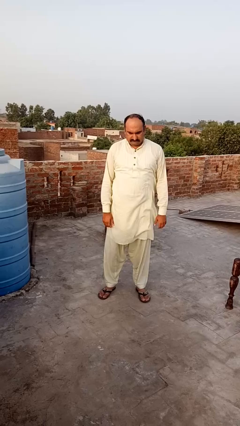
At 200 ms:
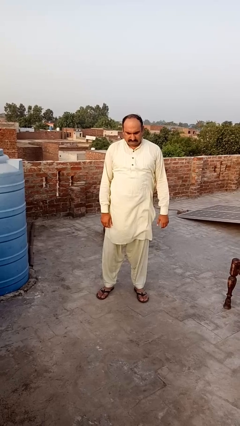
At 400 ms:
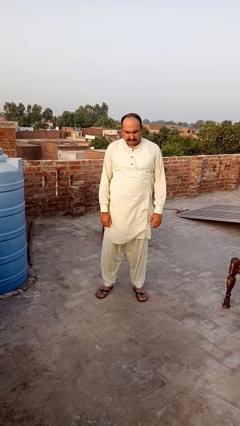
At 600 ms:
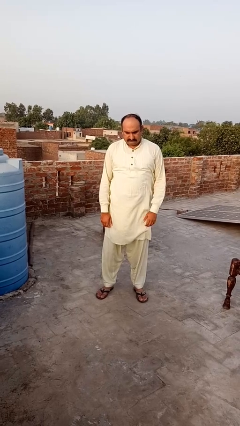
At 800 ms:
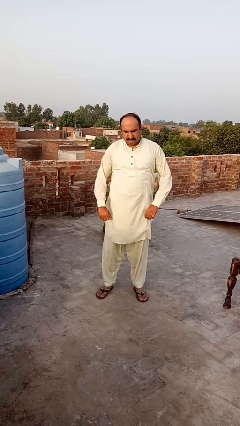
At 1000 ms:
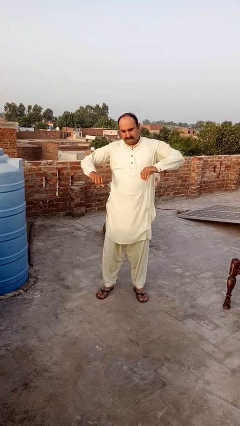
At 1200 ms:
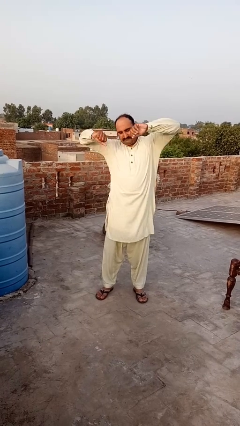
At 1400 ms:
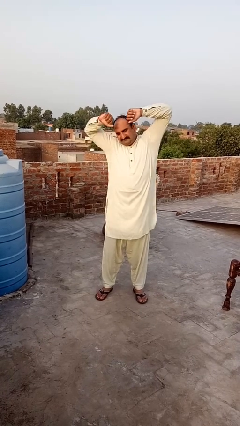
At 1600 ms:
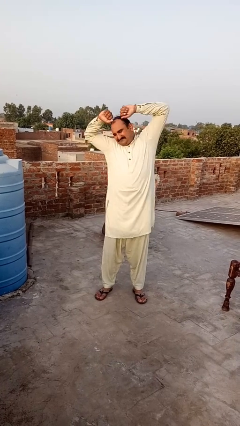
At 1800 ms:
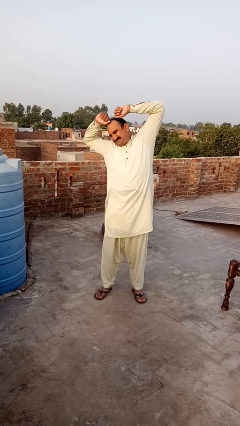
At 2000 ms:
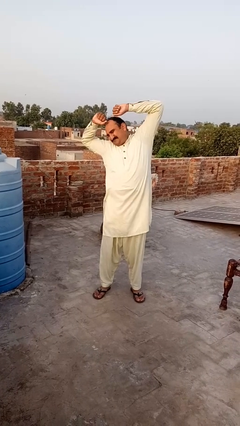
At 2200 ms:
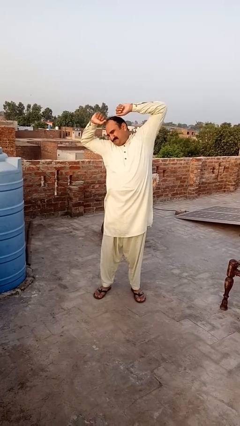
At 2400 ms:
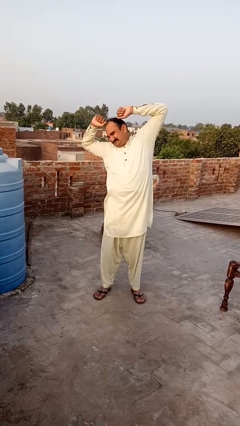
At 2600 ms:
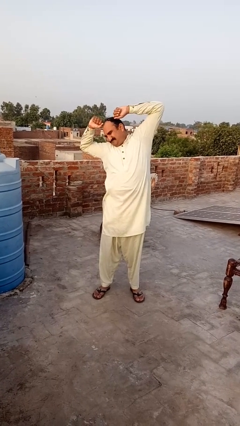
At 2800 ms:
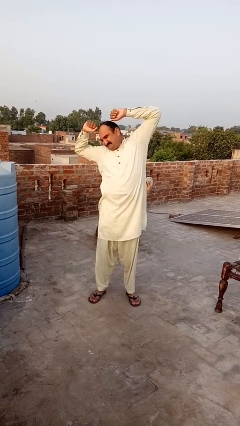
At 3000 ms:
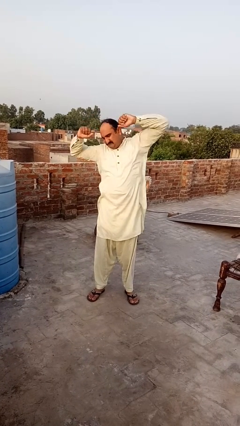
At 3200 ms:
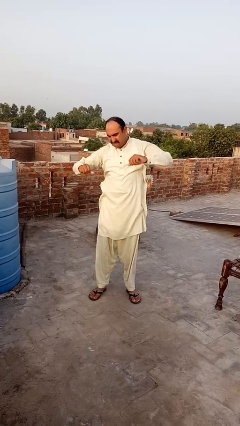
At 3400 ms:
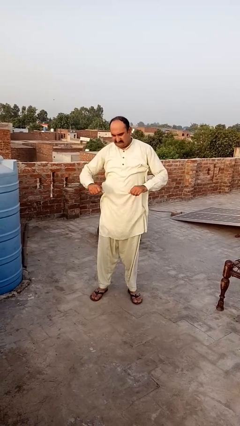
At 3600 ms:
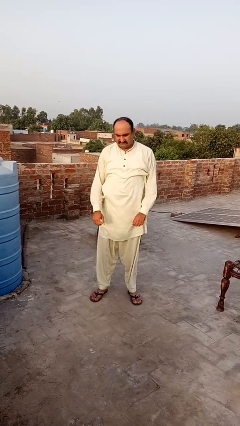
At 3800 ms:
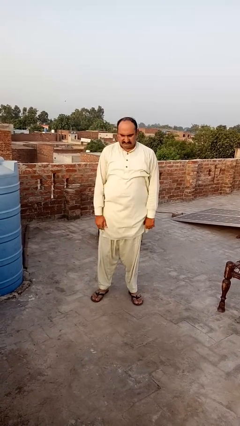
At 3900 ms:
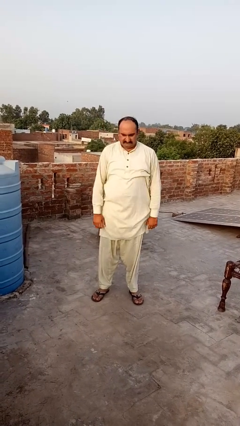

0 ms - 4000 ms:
person stretches arms to side

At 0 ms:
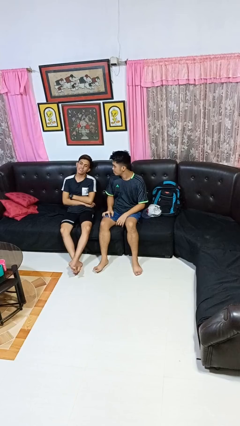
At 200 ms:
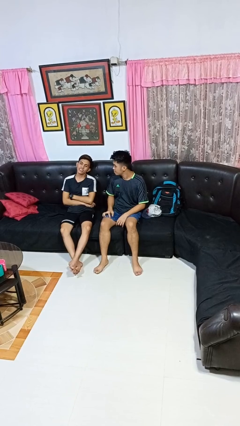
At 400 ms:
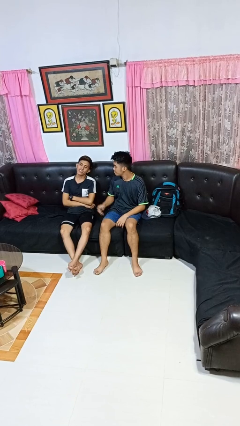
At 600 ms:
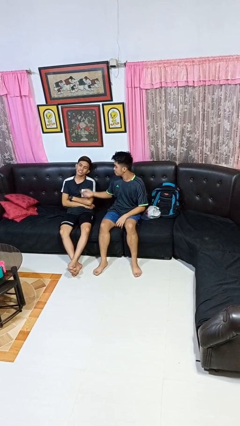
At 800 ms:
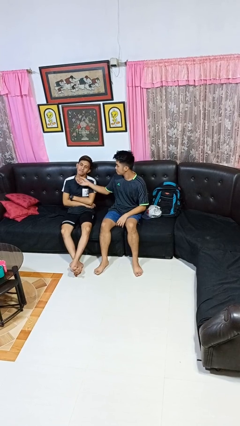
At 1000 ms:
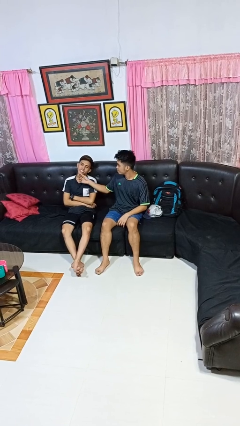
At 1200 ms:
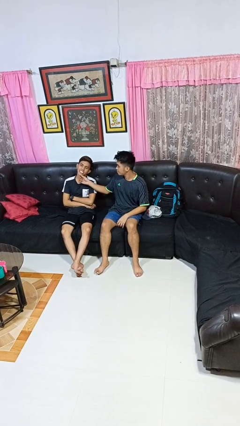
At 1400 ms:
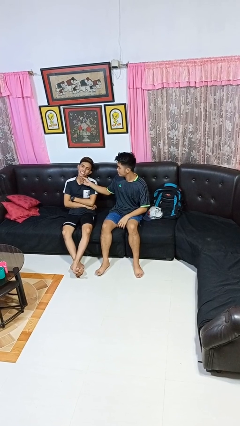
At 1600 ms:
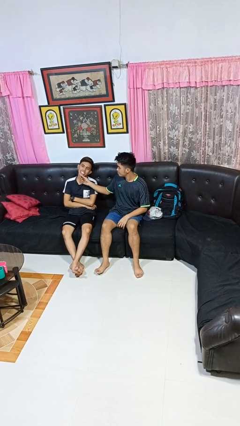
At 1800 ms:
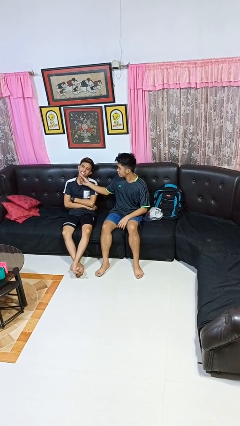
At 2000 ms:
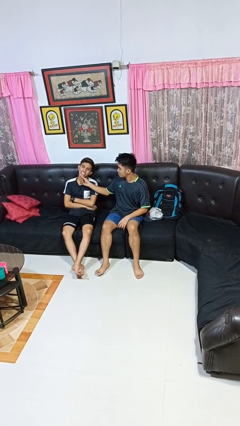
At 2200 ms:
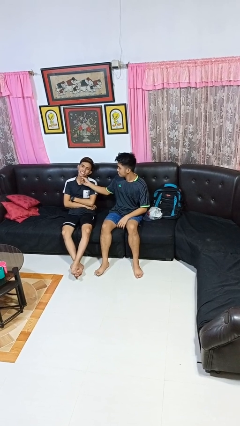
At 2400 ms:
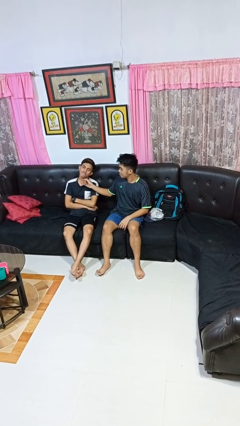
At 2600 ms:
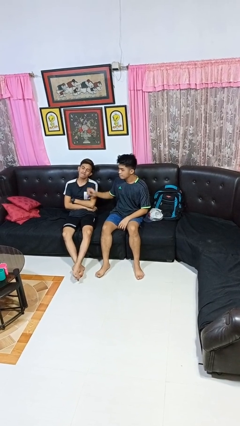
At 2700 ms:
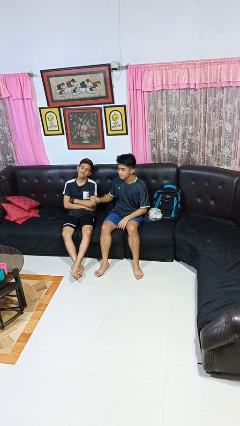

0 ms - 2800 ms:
person touches face of person

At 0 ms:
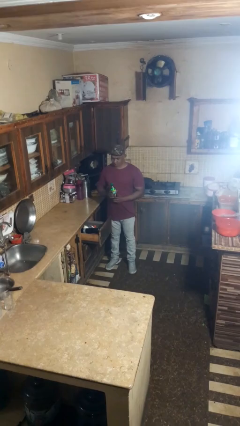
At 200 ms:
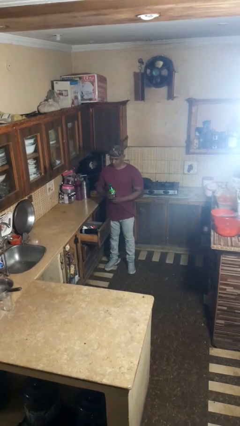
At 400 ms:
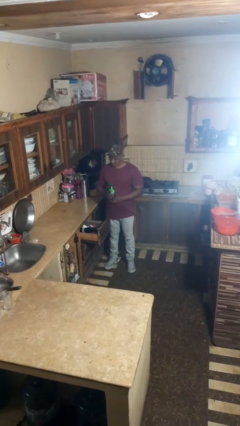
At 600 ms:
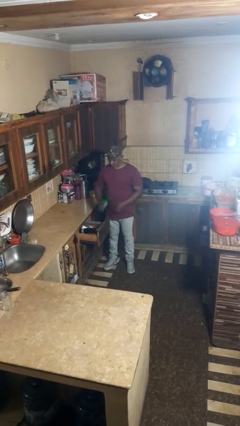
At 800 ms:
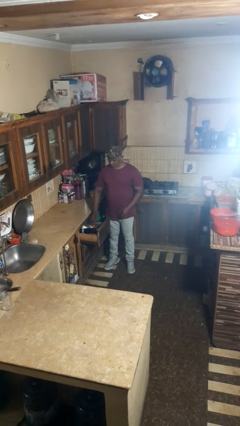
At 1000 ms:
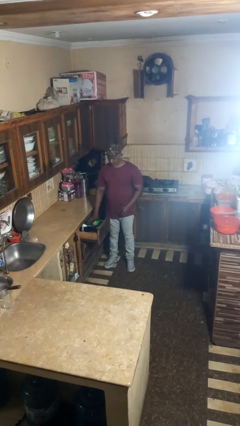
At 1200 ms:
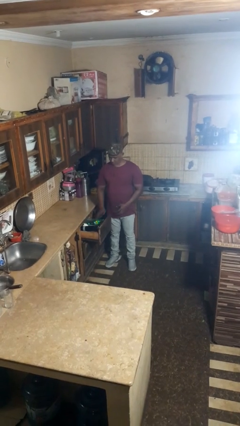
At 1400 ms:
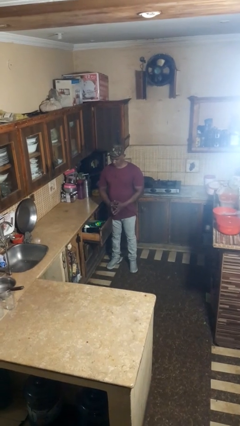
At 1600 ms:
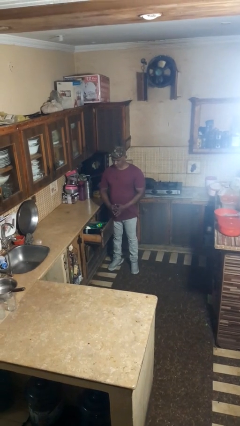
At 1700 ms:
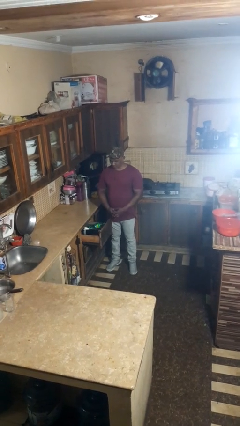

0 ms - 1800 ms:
person puts object into kitchen drawer

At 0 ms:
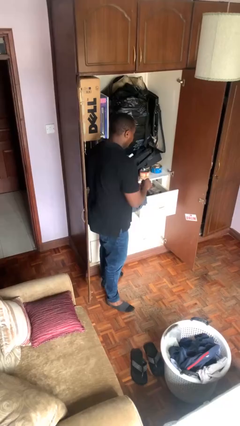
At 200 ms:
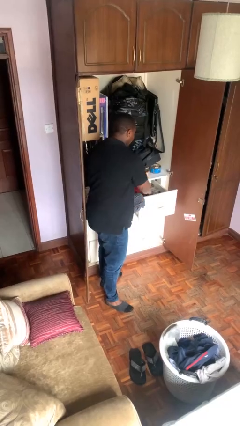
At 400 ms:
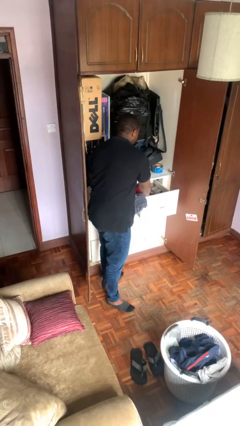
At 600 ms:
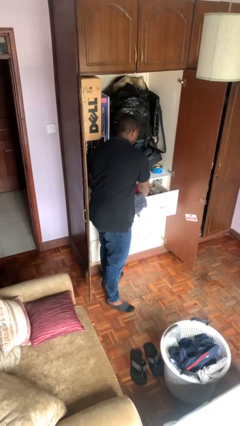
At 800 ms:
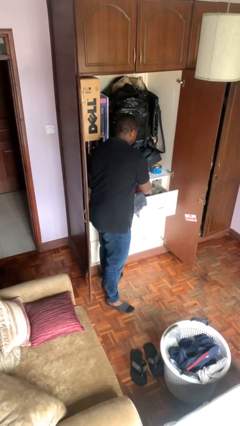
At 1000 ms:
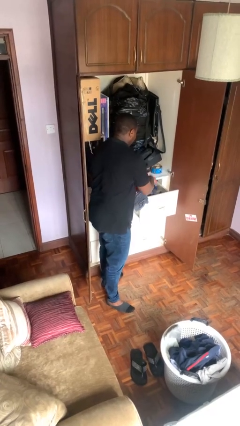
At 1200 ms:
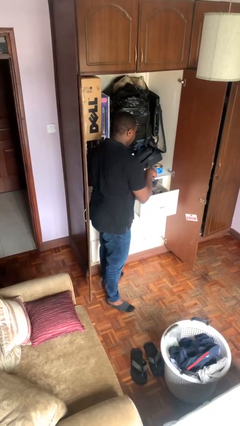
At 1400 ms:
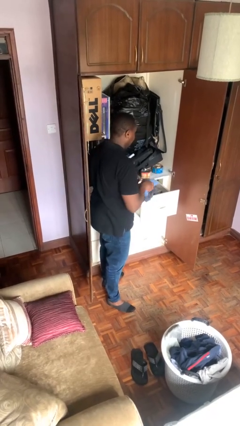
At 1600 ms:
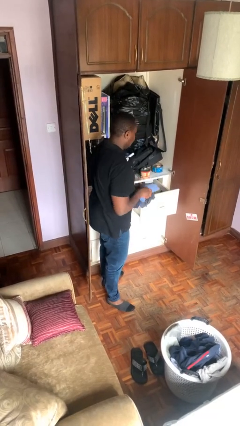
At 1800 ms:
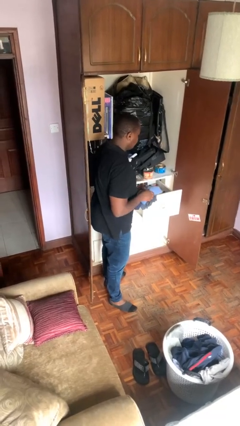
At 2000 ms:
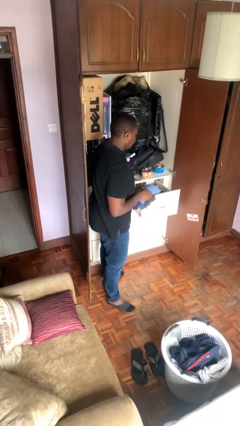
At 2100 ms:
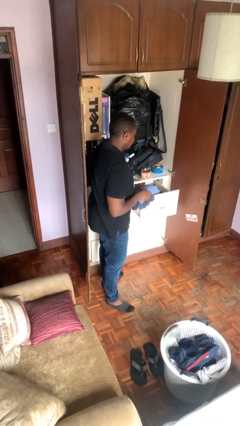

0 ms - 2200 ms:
person takes clothes from dresser

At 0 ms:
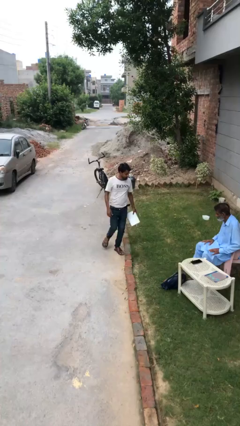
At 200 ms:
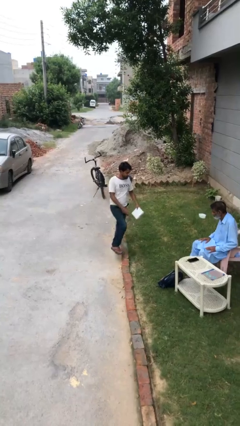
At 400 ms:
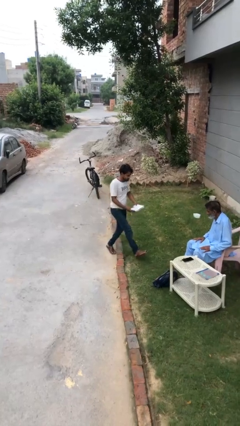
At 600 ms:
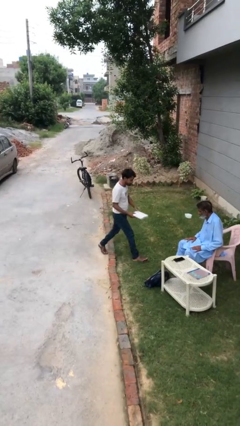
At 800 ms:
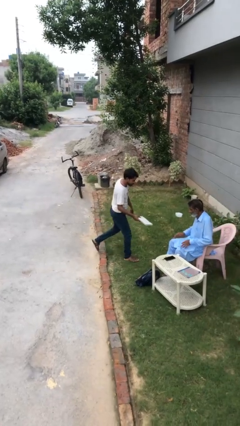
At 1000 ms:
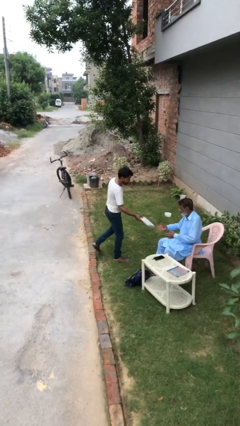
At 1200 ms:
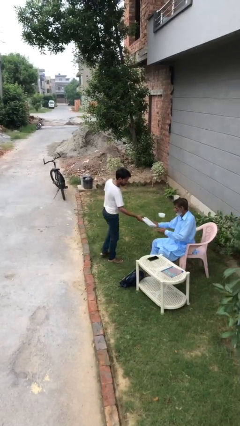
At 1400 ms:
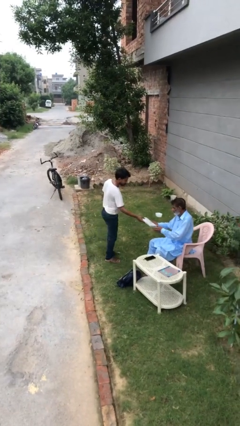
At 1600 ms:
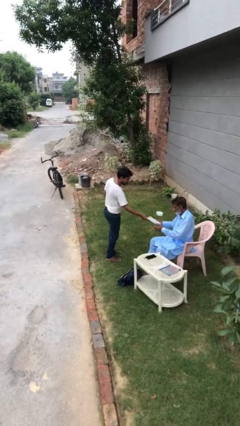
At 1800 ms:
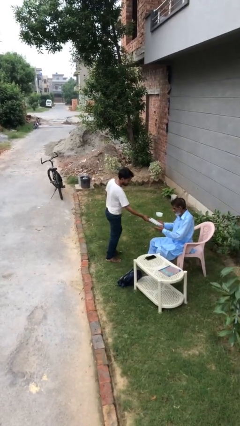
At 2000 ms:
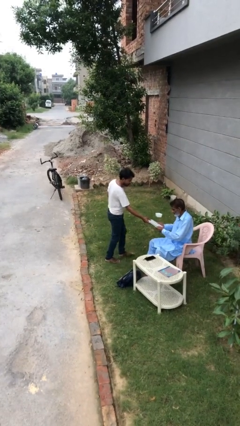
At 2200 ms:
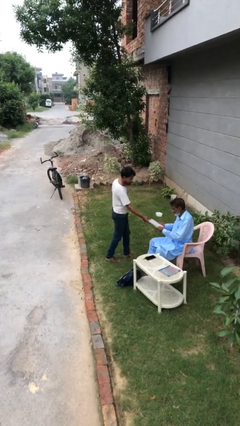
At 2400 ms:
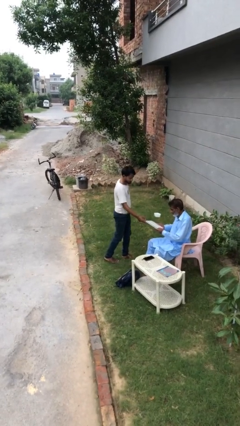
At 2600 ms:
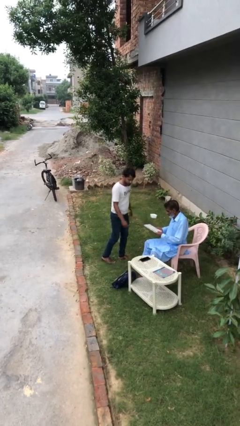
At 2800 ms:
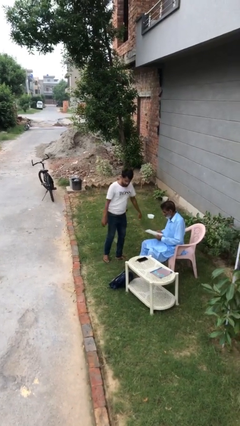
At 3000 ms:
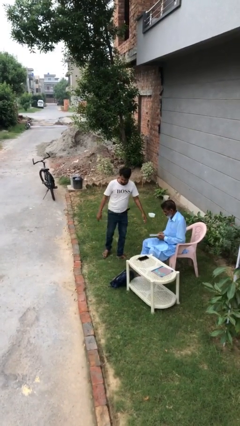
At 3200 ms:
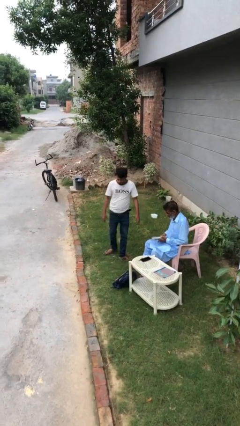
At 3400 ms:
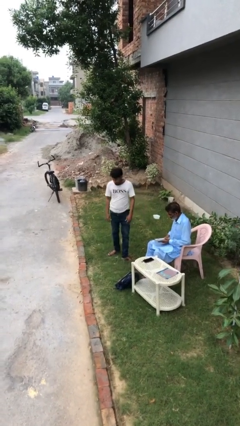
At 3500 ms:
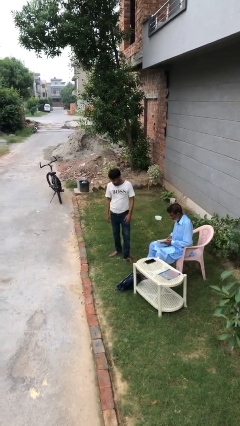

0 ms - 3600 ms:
person transfers object to person

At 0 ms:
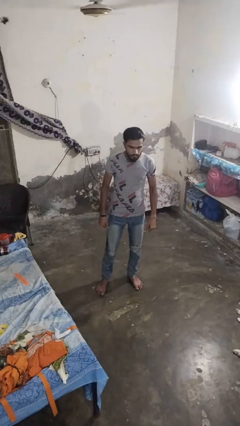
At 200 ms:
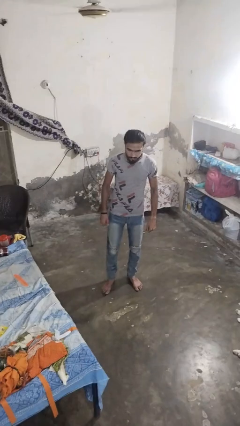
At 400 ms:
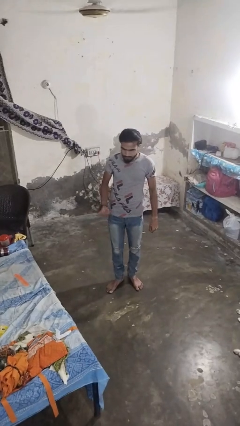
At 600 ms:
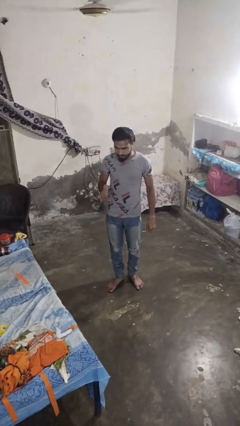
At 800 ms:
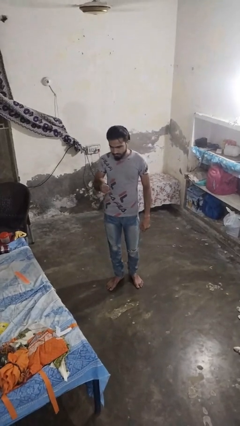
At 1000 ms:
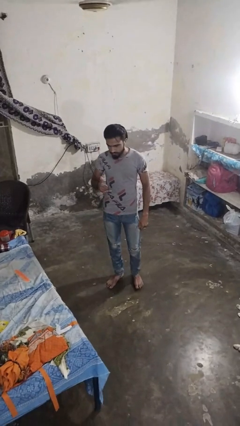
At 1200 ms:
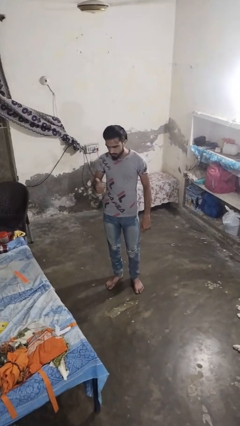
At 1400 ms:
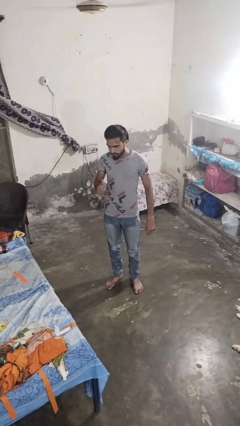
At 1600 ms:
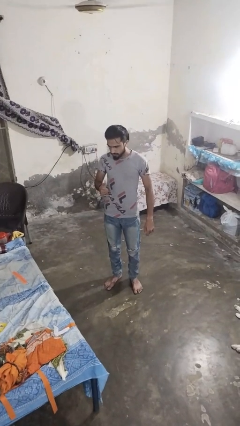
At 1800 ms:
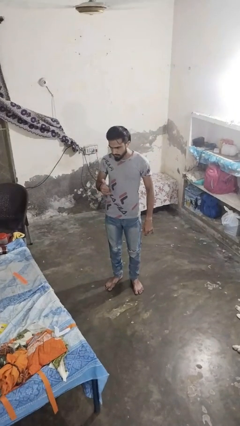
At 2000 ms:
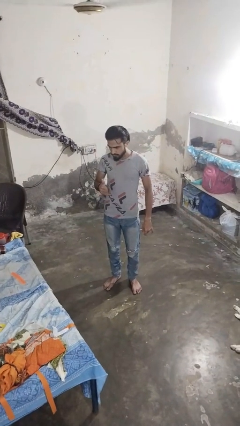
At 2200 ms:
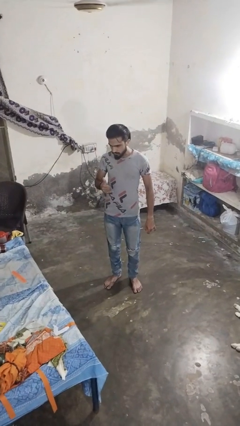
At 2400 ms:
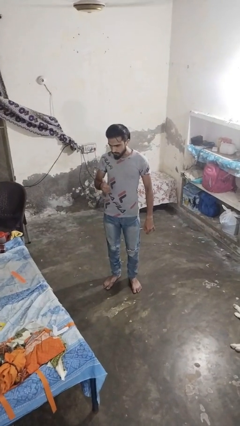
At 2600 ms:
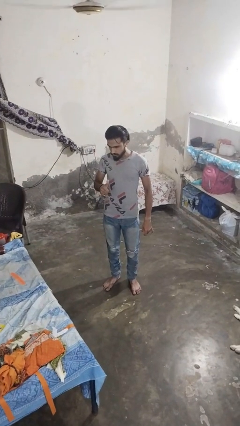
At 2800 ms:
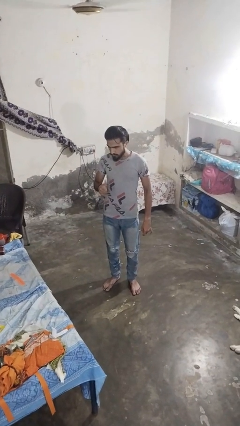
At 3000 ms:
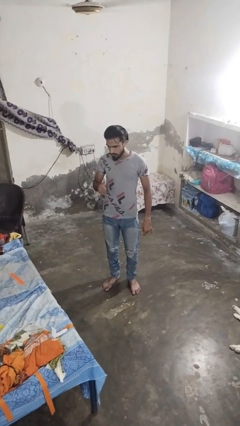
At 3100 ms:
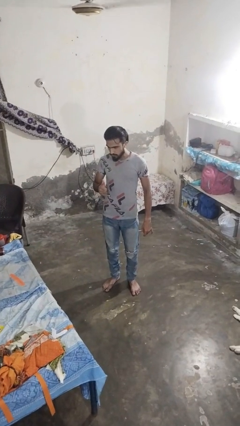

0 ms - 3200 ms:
person gestures hang loose
